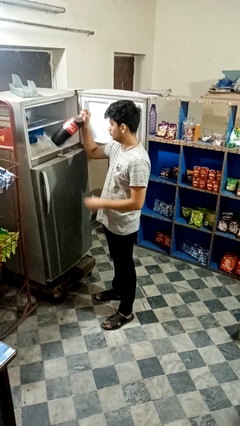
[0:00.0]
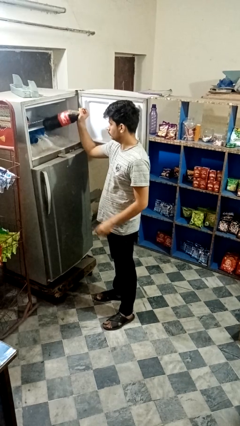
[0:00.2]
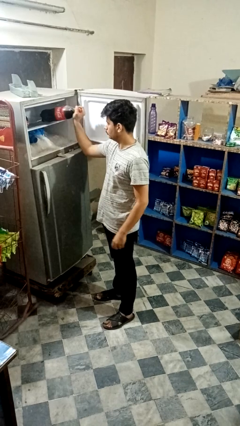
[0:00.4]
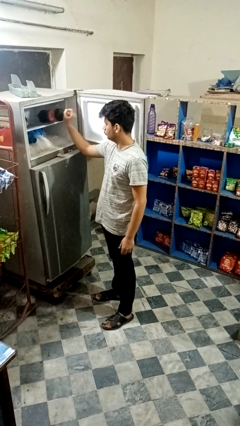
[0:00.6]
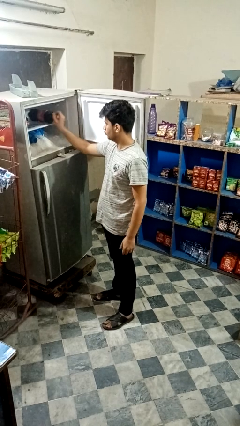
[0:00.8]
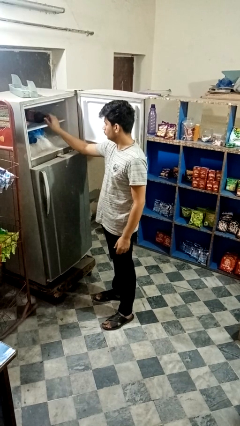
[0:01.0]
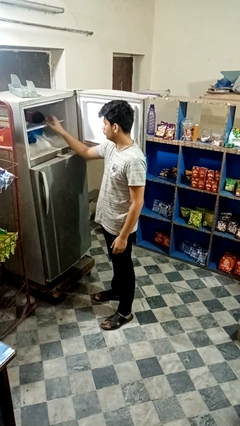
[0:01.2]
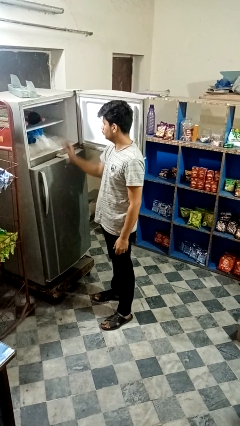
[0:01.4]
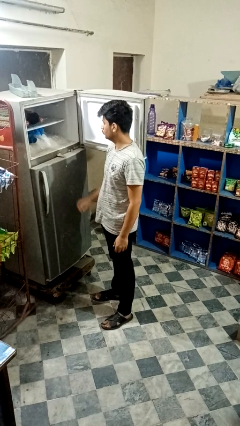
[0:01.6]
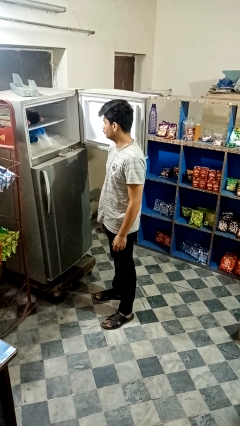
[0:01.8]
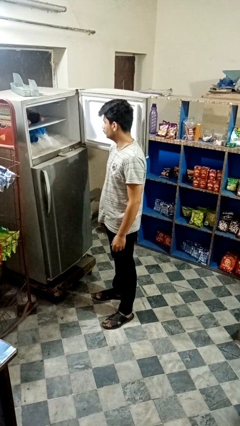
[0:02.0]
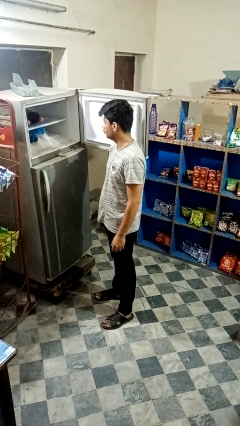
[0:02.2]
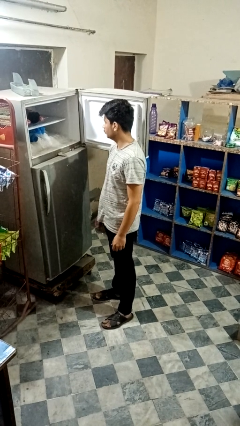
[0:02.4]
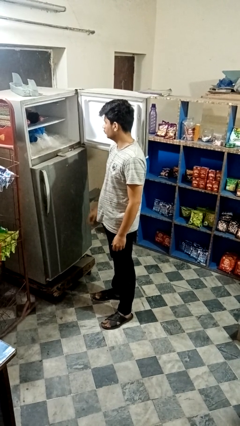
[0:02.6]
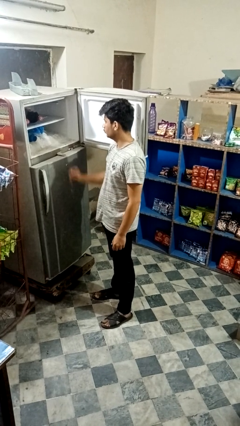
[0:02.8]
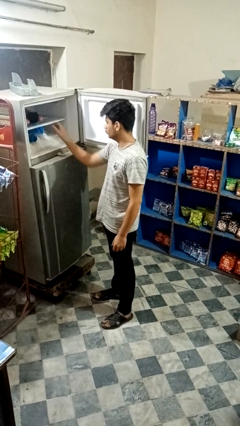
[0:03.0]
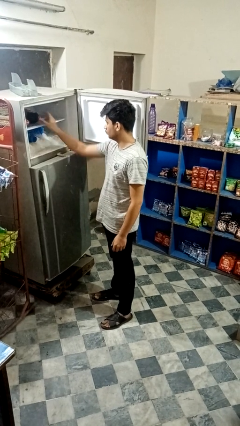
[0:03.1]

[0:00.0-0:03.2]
person puts object into refrigerator

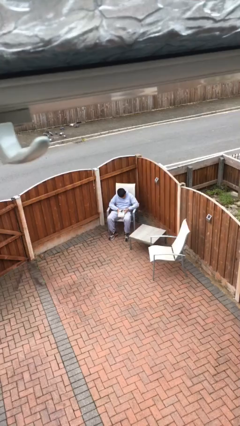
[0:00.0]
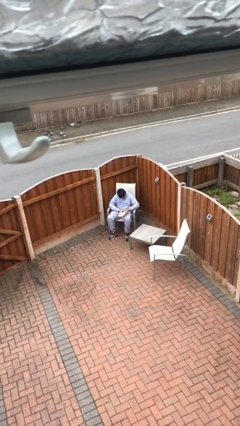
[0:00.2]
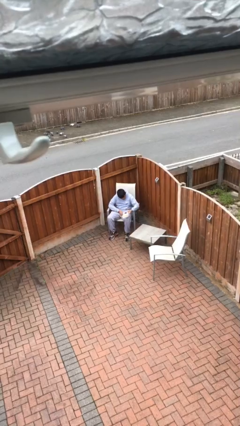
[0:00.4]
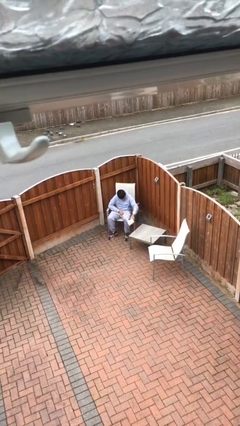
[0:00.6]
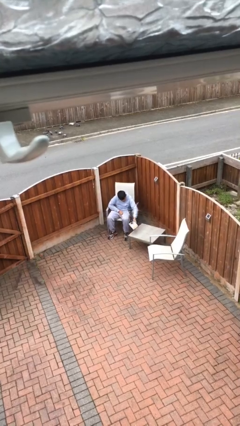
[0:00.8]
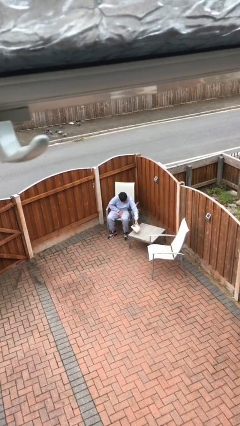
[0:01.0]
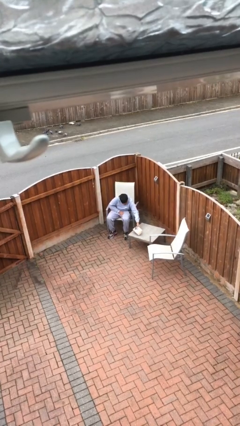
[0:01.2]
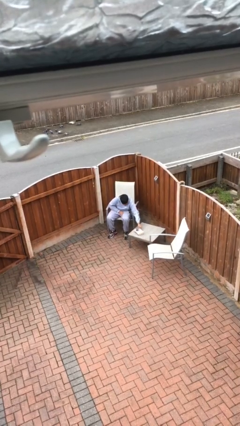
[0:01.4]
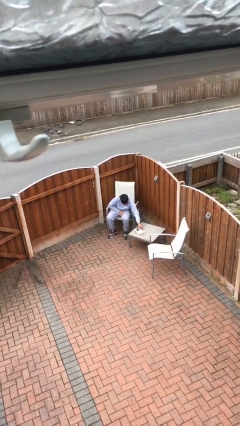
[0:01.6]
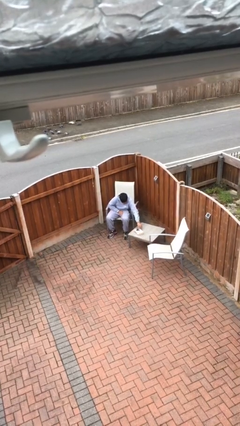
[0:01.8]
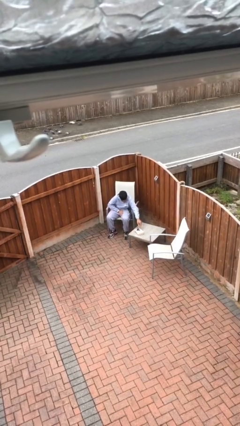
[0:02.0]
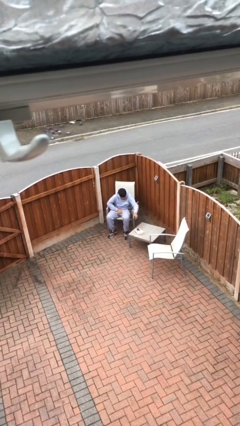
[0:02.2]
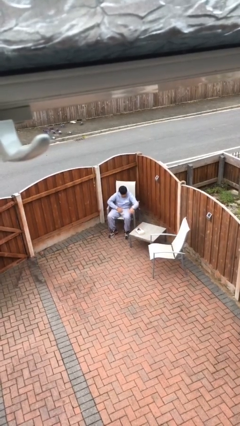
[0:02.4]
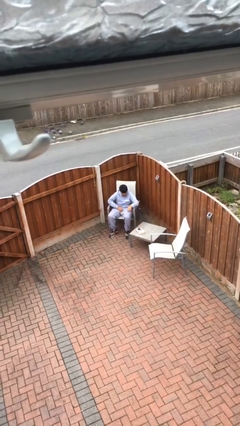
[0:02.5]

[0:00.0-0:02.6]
person puts down object on table

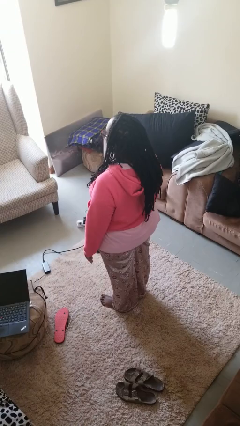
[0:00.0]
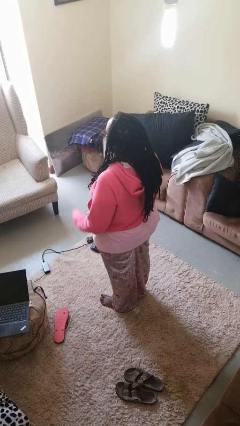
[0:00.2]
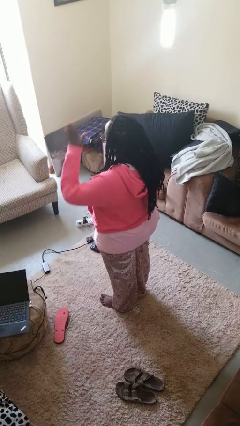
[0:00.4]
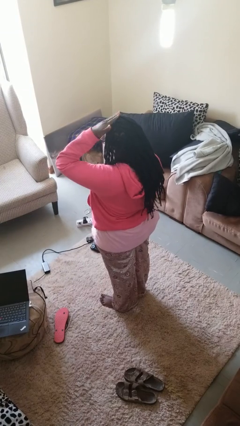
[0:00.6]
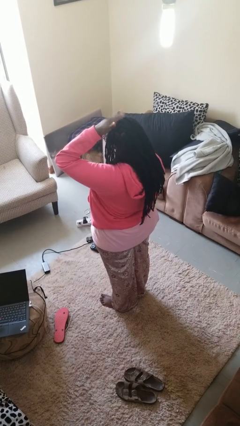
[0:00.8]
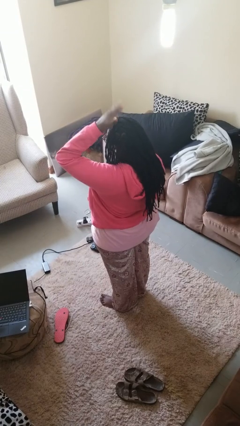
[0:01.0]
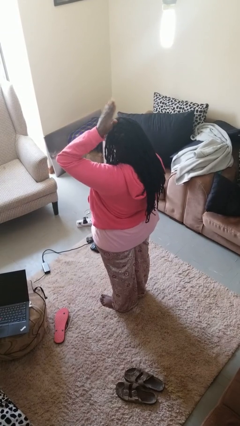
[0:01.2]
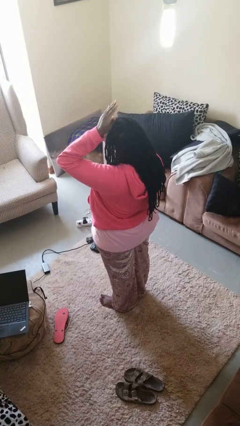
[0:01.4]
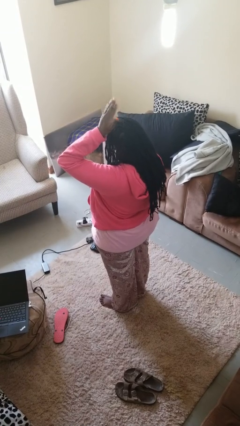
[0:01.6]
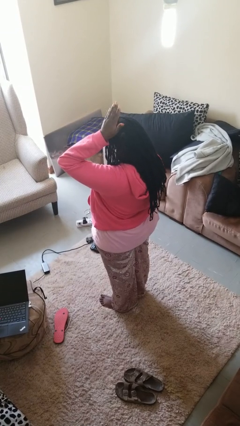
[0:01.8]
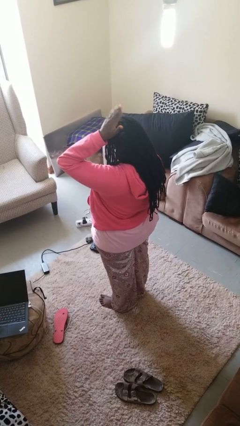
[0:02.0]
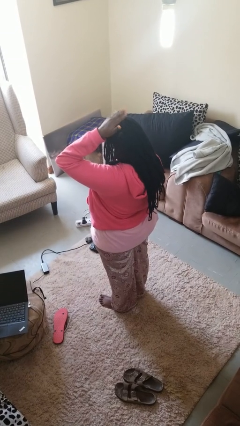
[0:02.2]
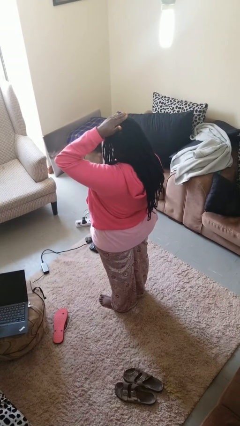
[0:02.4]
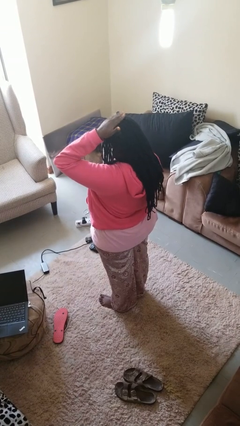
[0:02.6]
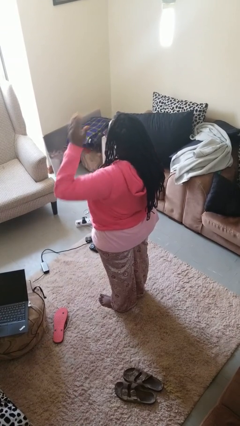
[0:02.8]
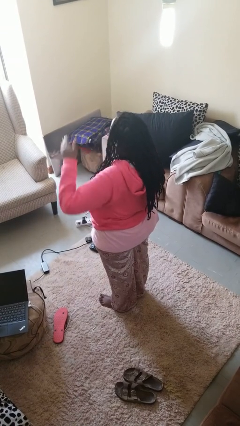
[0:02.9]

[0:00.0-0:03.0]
person pats head

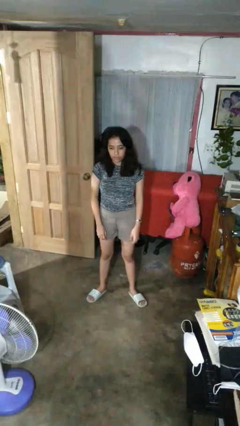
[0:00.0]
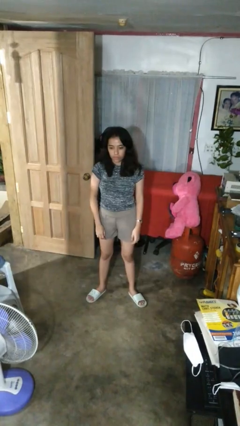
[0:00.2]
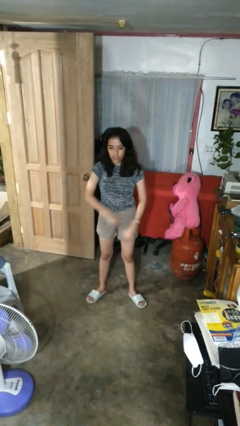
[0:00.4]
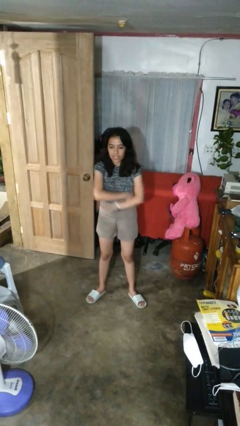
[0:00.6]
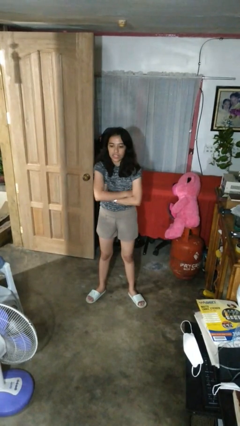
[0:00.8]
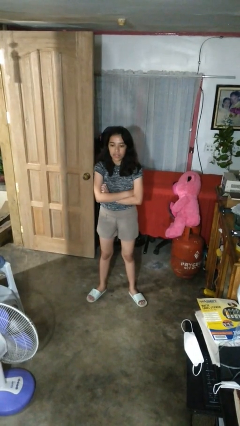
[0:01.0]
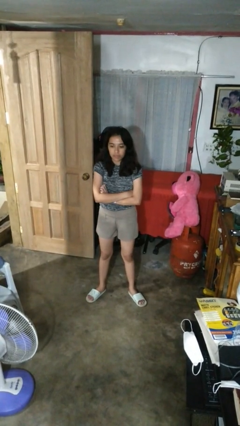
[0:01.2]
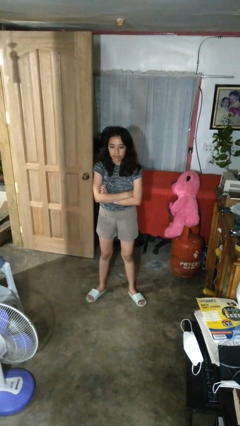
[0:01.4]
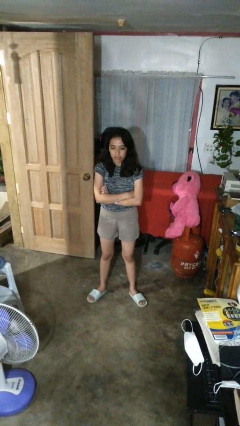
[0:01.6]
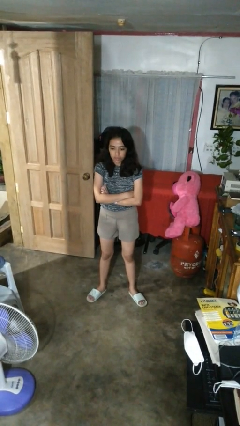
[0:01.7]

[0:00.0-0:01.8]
person crosses arms

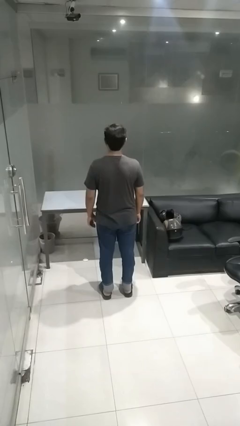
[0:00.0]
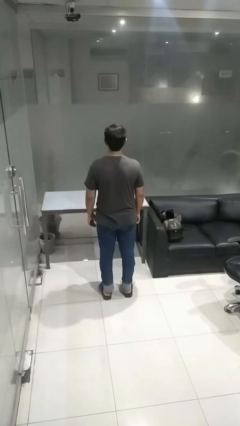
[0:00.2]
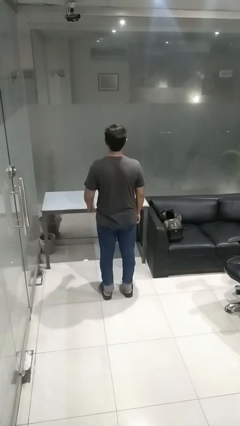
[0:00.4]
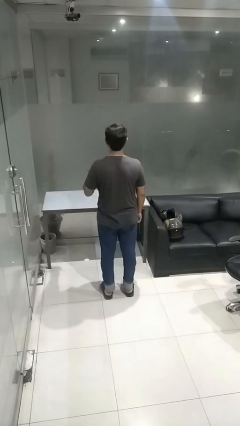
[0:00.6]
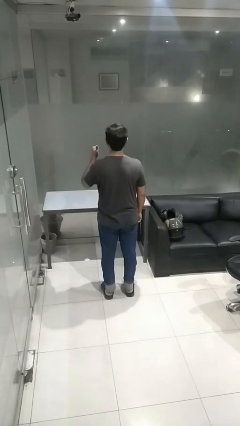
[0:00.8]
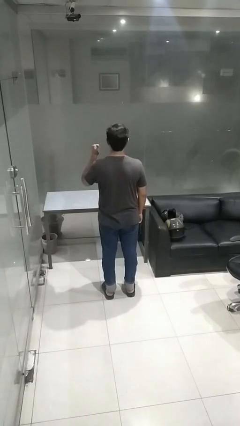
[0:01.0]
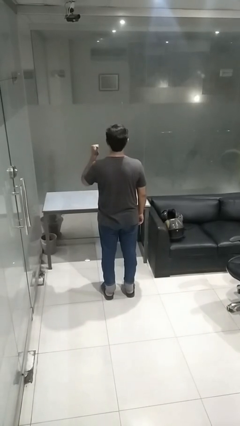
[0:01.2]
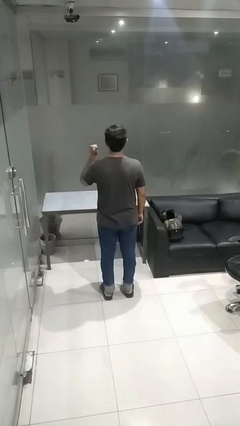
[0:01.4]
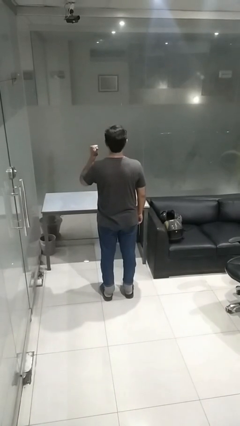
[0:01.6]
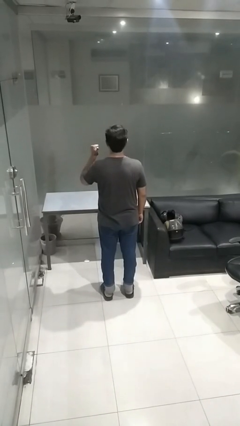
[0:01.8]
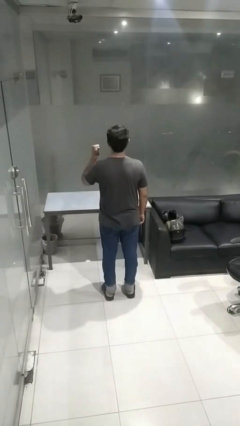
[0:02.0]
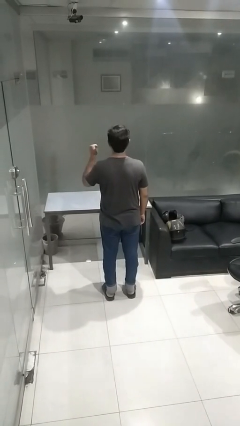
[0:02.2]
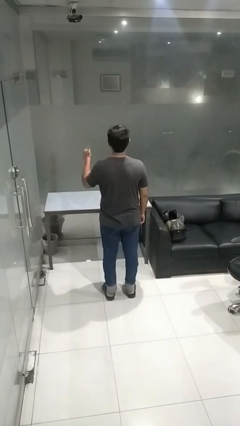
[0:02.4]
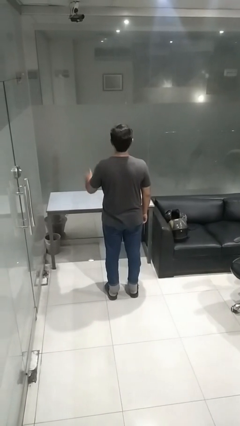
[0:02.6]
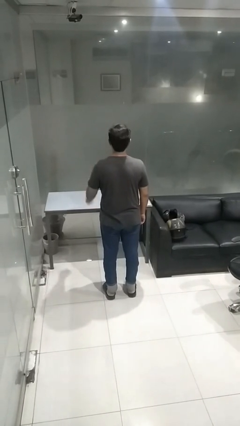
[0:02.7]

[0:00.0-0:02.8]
person gestures behind me

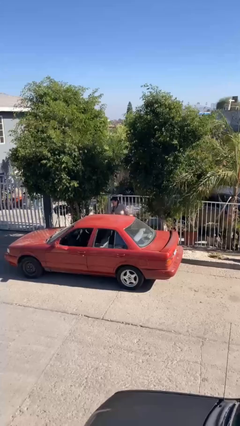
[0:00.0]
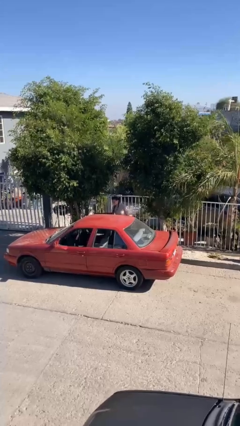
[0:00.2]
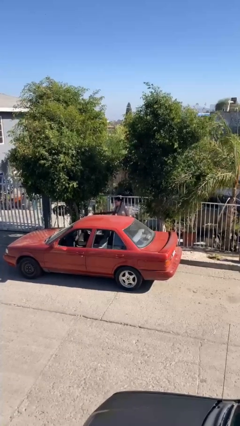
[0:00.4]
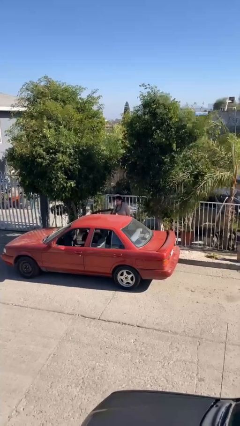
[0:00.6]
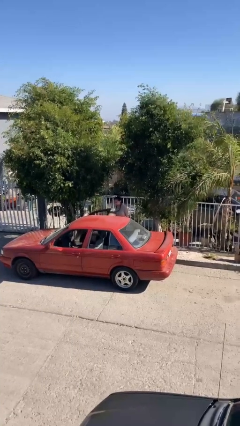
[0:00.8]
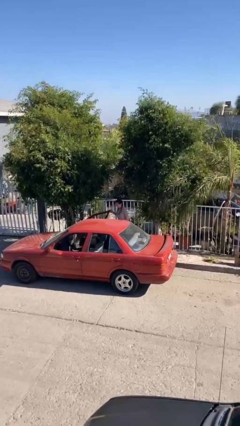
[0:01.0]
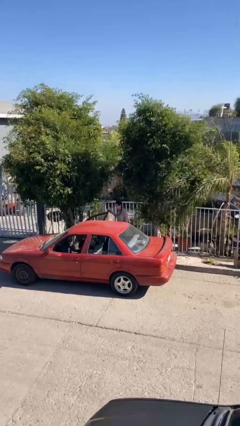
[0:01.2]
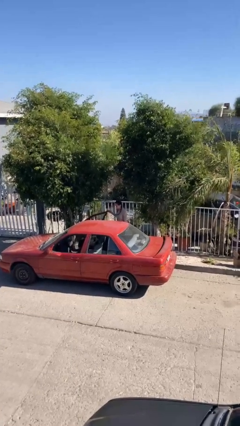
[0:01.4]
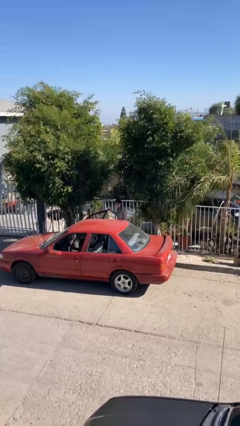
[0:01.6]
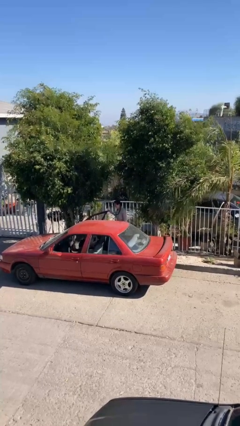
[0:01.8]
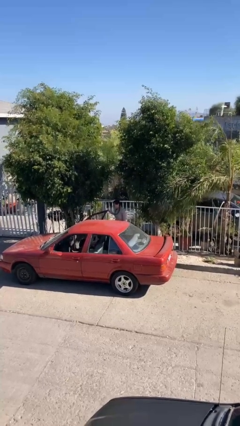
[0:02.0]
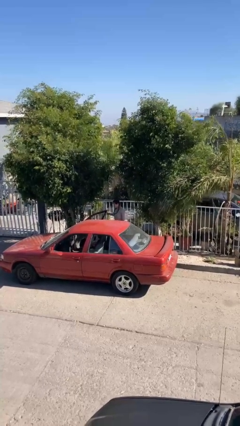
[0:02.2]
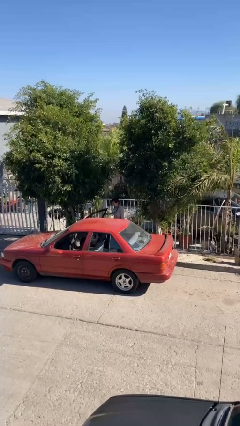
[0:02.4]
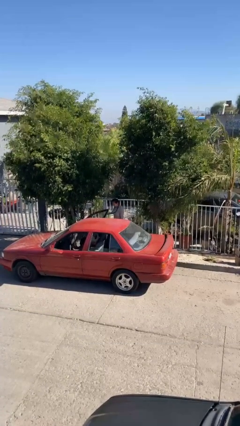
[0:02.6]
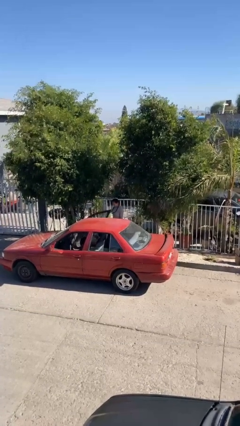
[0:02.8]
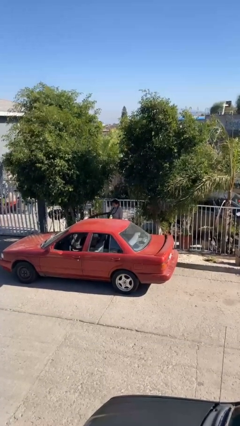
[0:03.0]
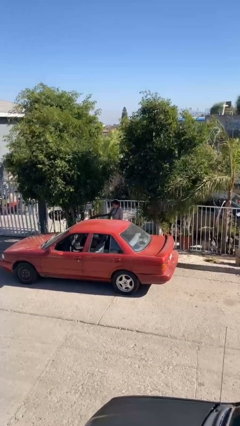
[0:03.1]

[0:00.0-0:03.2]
person opens car door

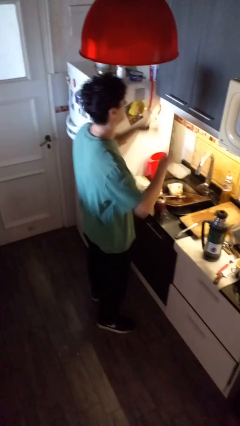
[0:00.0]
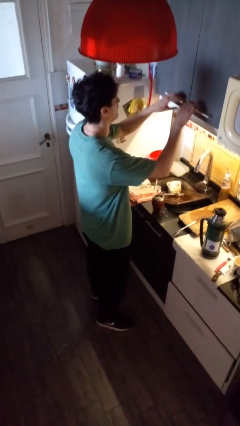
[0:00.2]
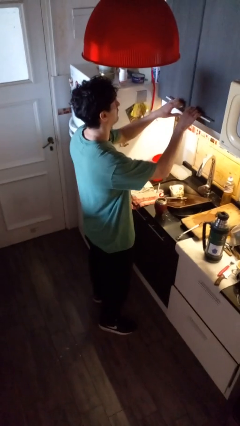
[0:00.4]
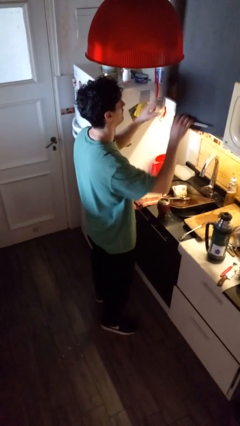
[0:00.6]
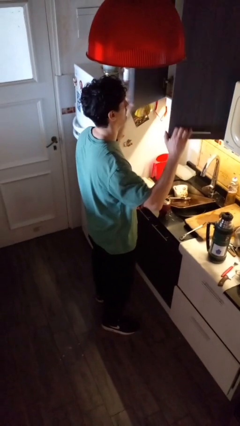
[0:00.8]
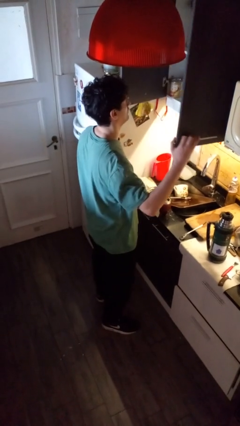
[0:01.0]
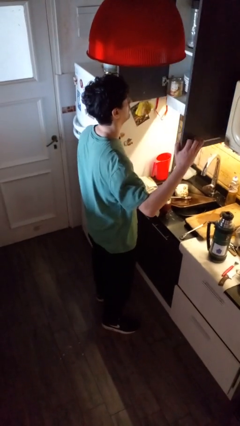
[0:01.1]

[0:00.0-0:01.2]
person opens kitchen drawer
